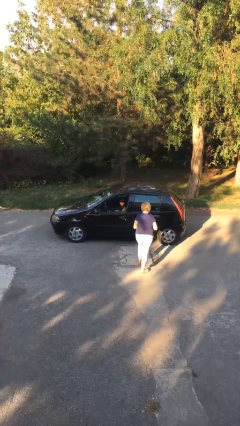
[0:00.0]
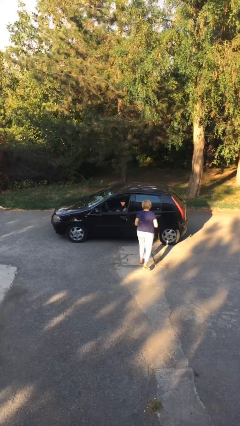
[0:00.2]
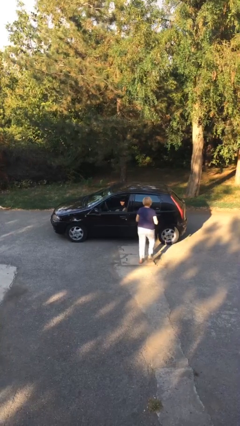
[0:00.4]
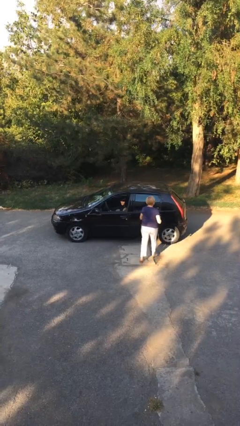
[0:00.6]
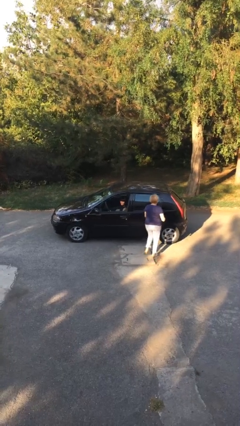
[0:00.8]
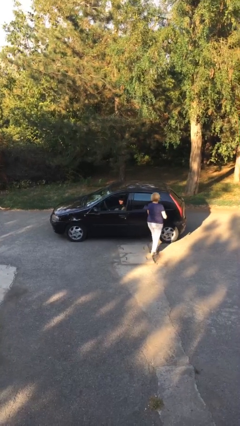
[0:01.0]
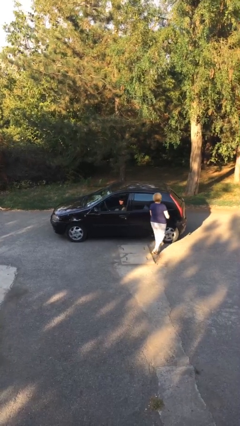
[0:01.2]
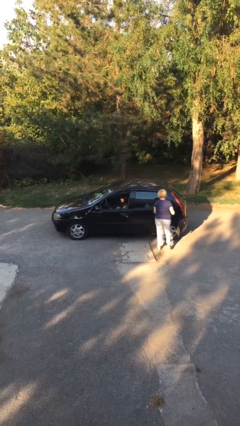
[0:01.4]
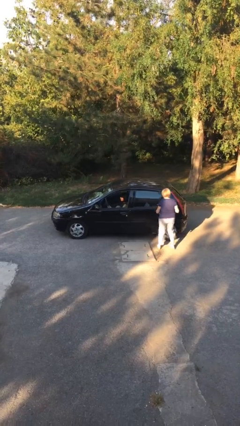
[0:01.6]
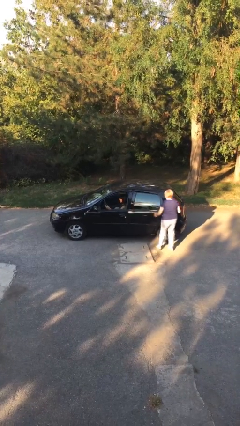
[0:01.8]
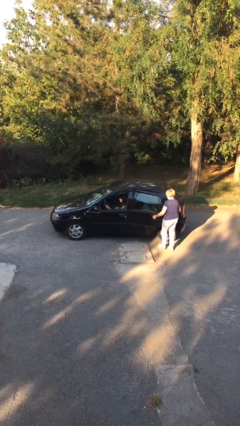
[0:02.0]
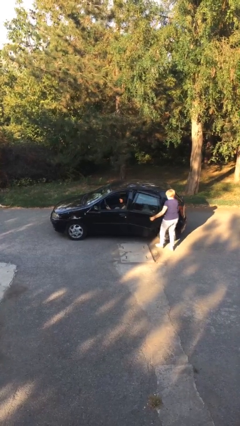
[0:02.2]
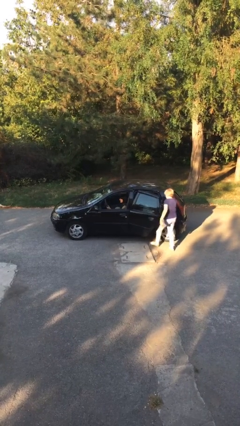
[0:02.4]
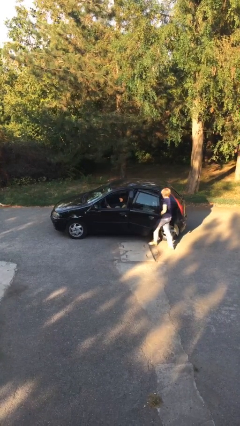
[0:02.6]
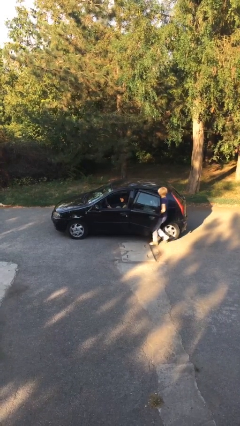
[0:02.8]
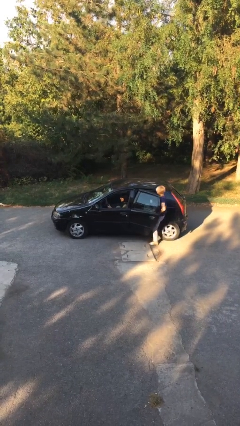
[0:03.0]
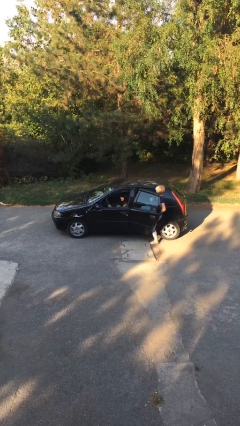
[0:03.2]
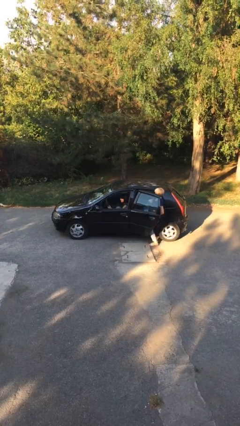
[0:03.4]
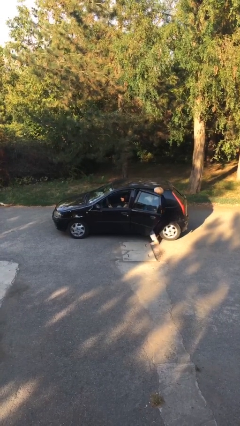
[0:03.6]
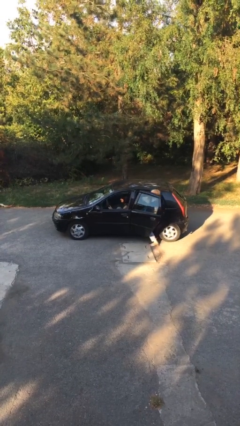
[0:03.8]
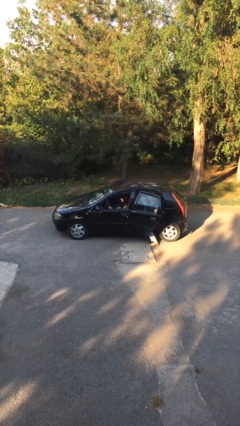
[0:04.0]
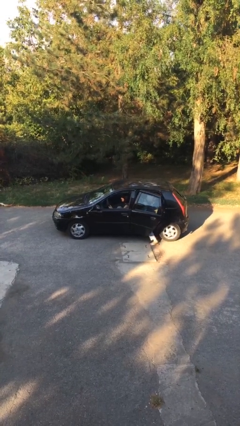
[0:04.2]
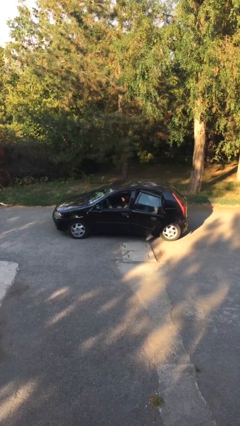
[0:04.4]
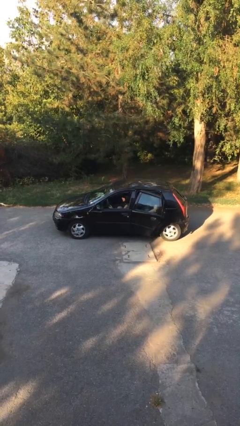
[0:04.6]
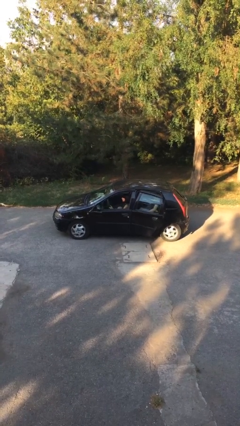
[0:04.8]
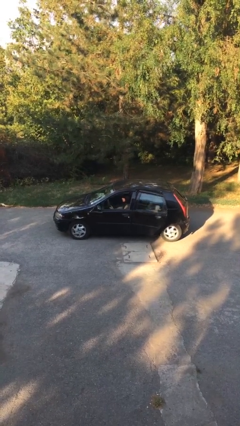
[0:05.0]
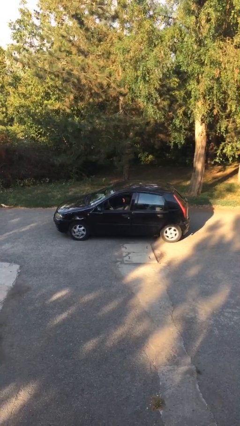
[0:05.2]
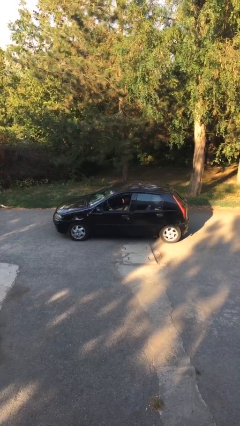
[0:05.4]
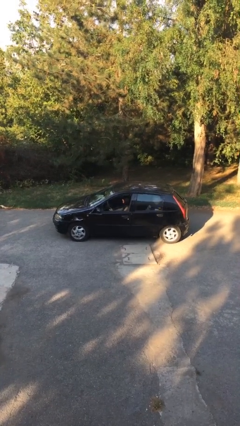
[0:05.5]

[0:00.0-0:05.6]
car picks up person

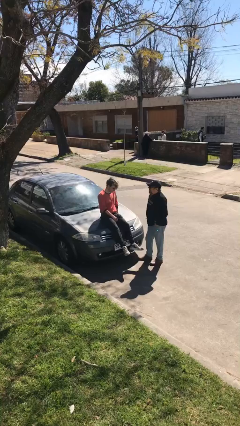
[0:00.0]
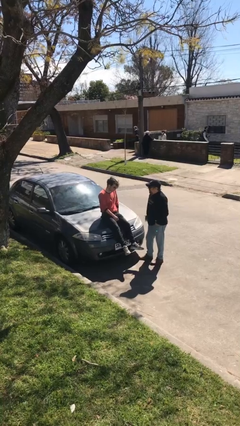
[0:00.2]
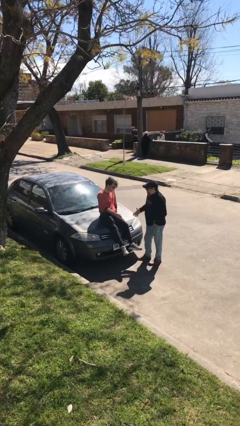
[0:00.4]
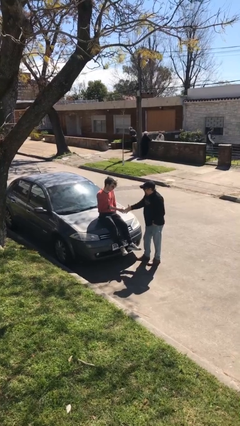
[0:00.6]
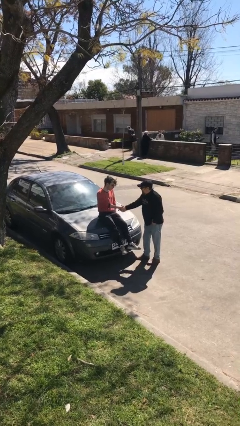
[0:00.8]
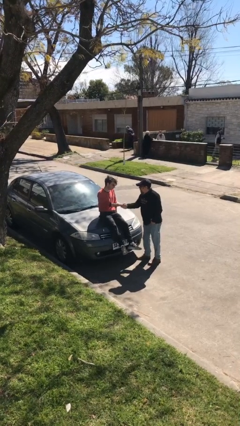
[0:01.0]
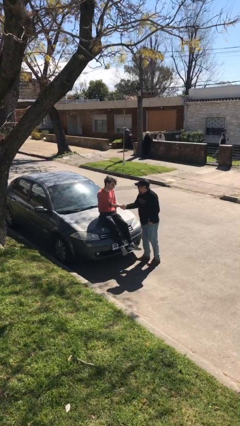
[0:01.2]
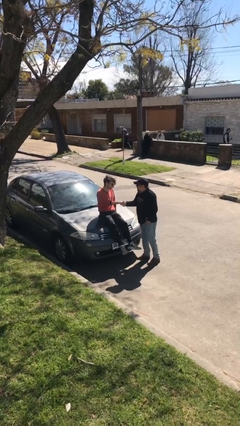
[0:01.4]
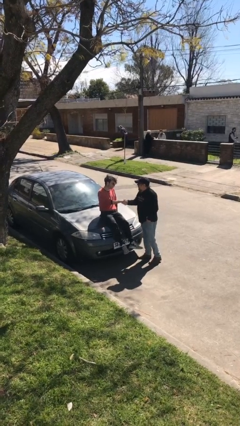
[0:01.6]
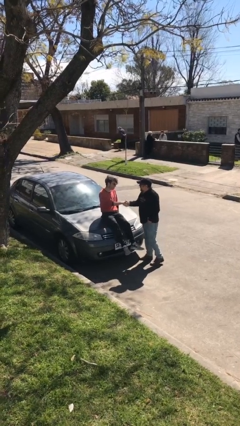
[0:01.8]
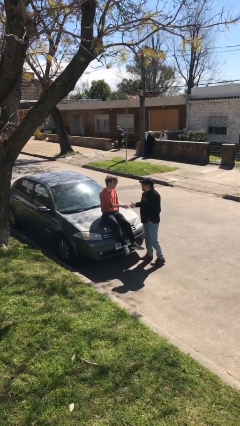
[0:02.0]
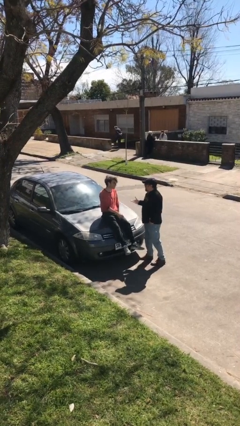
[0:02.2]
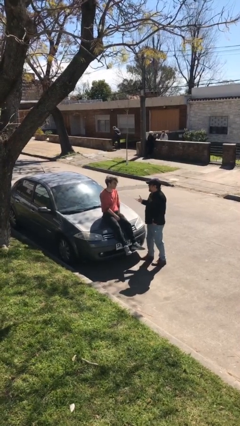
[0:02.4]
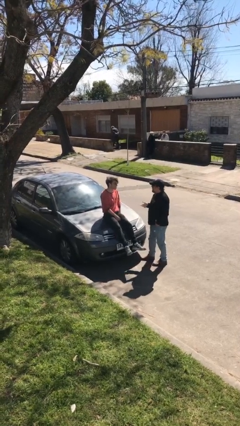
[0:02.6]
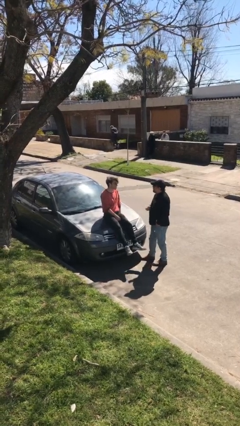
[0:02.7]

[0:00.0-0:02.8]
person shakes hand

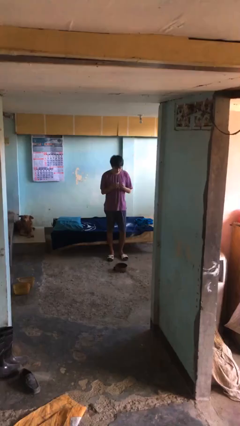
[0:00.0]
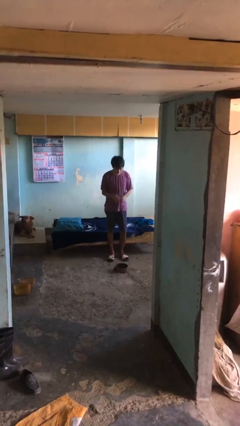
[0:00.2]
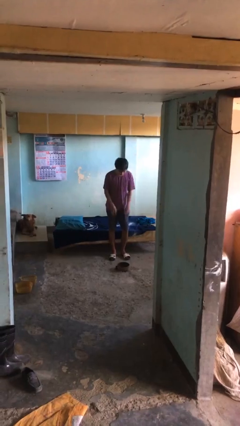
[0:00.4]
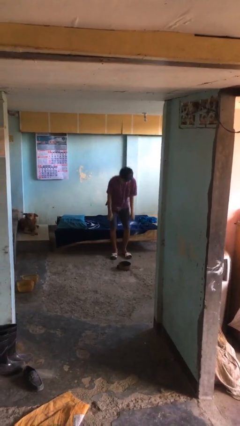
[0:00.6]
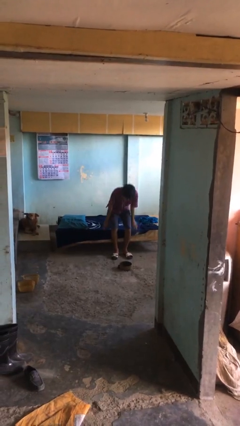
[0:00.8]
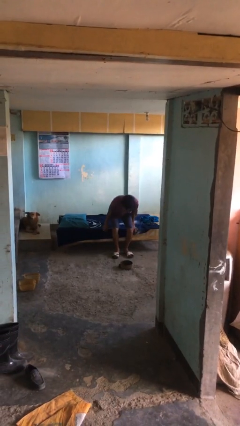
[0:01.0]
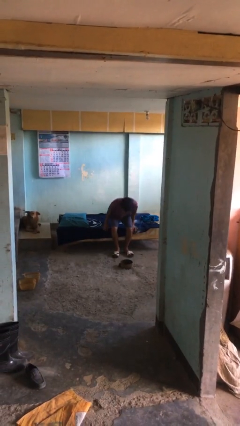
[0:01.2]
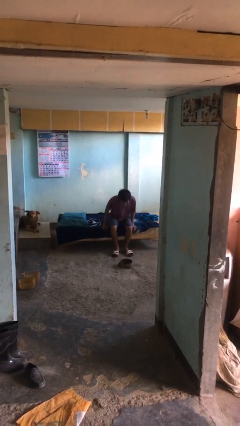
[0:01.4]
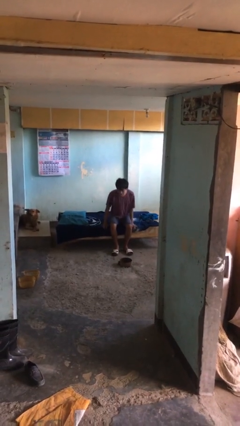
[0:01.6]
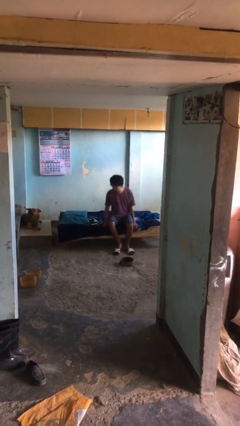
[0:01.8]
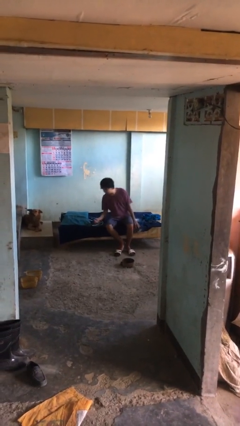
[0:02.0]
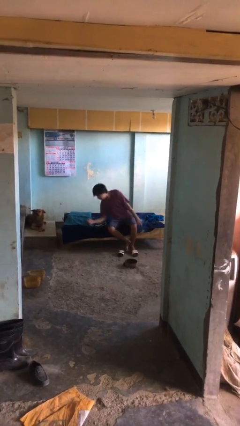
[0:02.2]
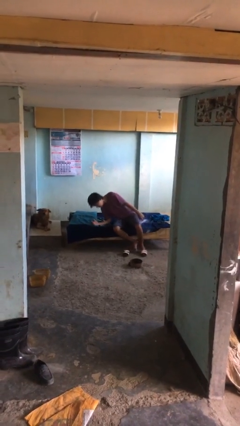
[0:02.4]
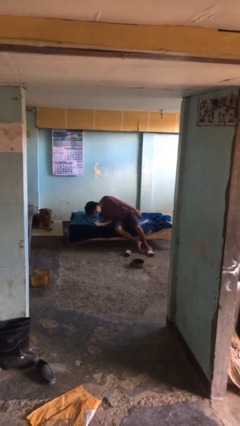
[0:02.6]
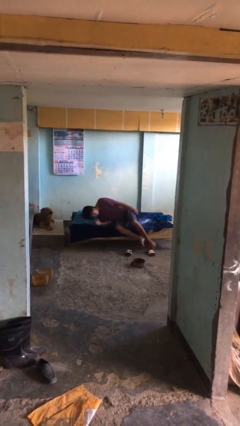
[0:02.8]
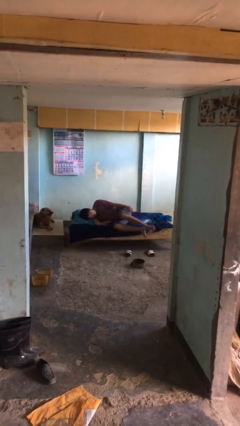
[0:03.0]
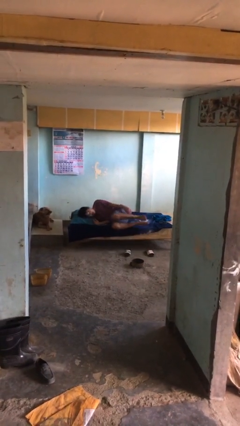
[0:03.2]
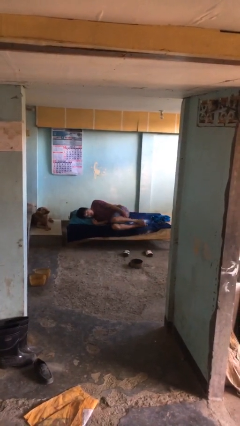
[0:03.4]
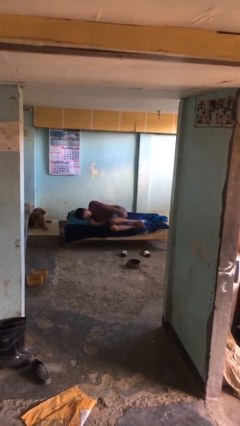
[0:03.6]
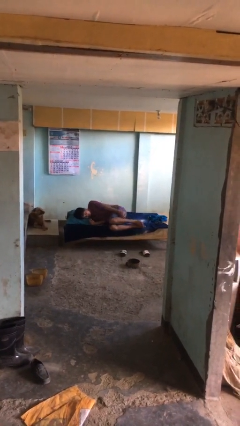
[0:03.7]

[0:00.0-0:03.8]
person lies down on bed

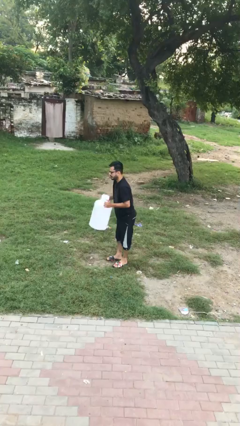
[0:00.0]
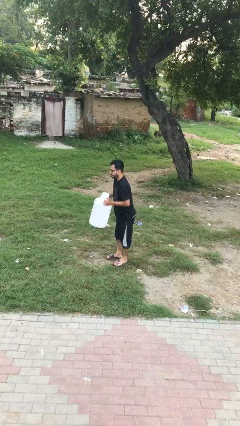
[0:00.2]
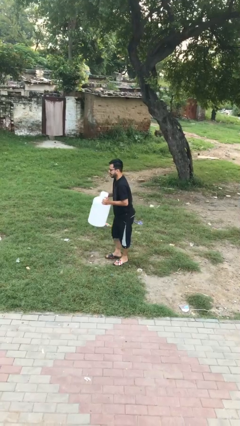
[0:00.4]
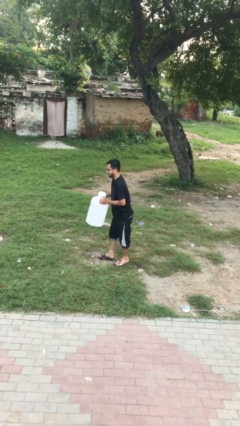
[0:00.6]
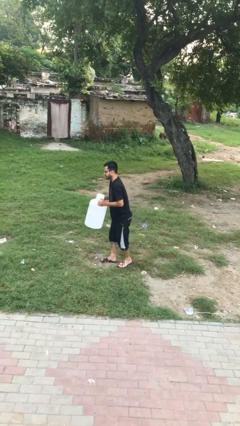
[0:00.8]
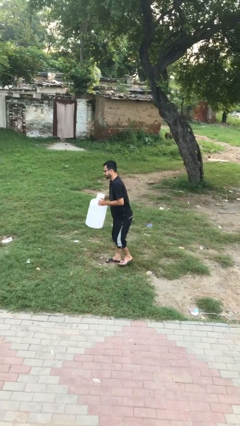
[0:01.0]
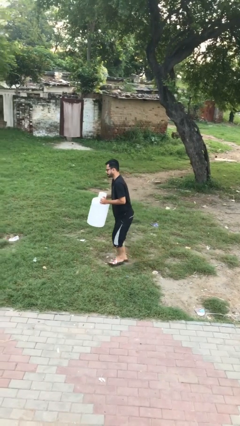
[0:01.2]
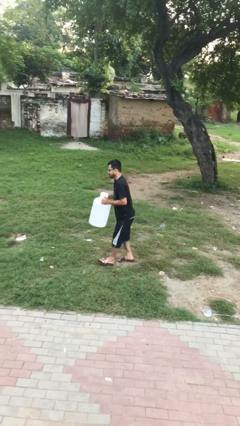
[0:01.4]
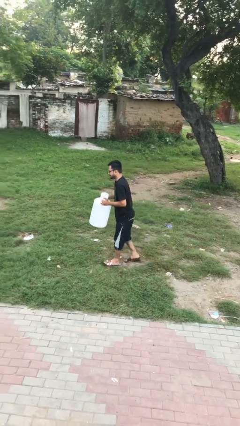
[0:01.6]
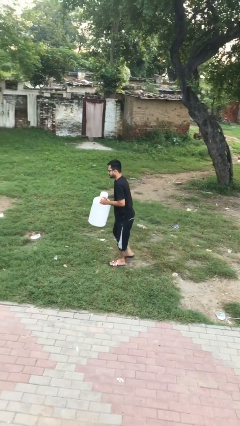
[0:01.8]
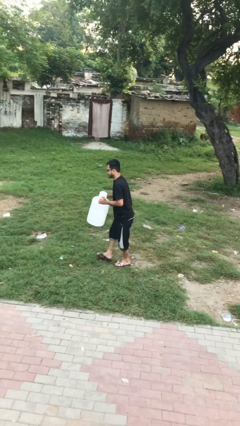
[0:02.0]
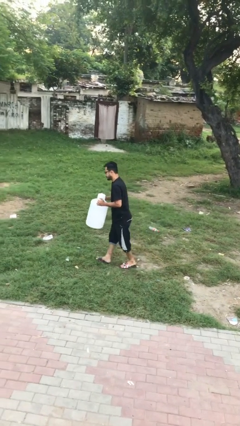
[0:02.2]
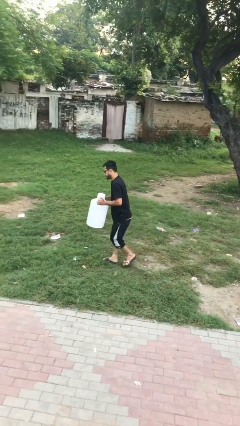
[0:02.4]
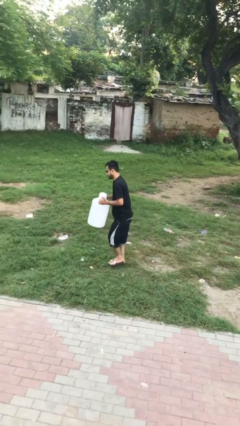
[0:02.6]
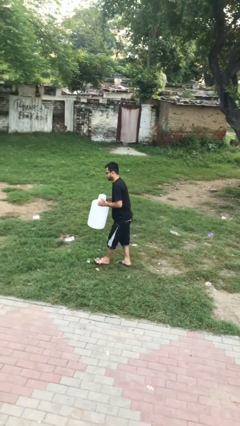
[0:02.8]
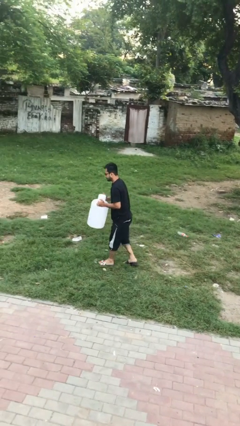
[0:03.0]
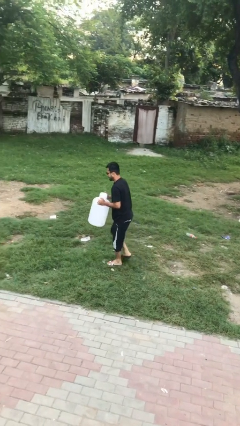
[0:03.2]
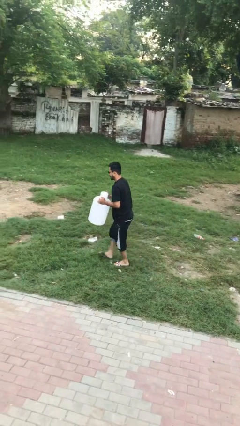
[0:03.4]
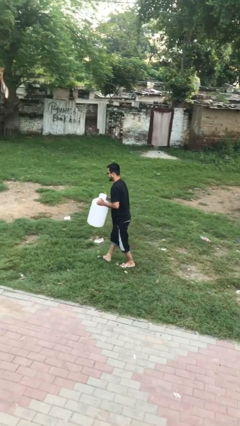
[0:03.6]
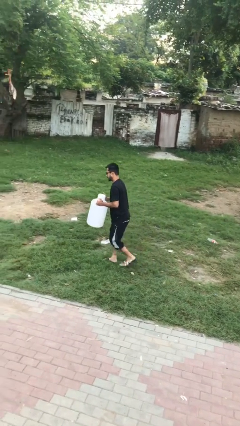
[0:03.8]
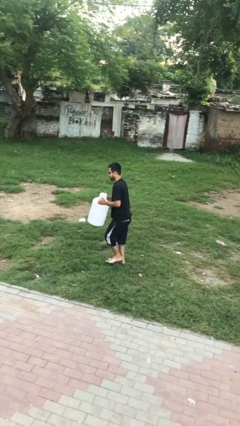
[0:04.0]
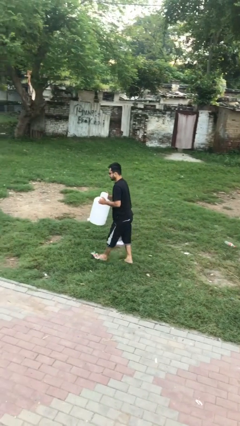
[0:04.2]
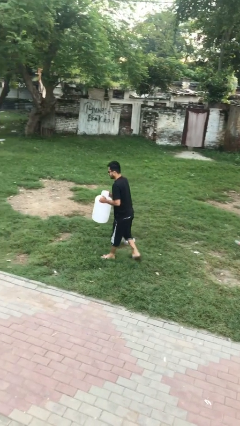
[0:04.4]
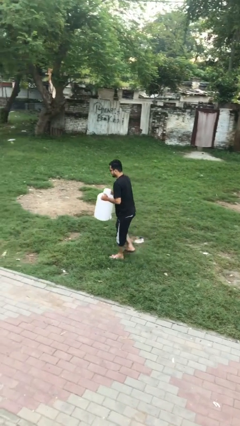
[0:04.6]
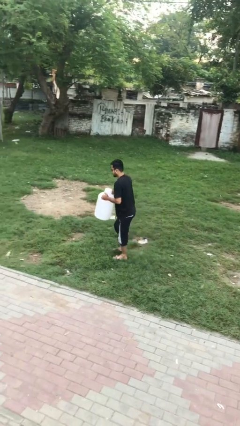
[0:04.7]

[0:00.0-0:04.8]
person carries heavy object

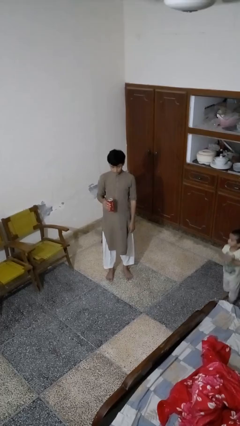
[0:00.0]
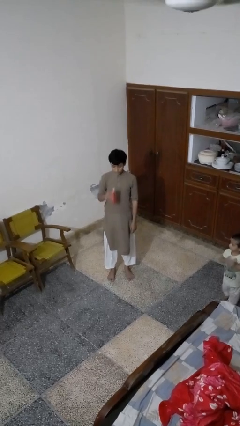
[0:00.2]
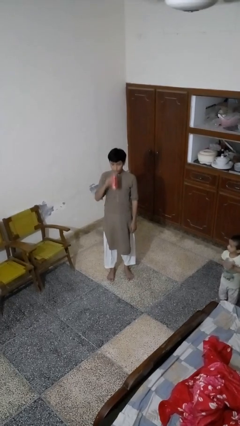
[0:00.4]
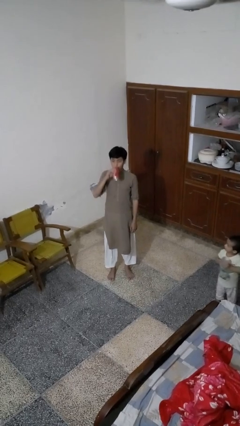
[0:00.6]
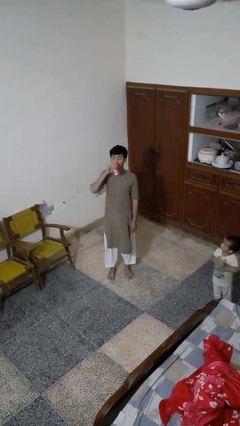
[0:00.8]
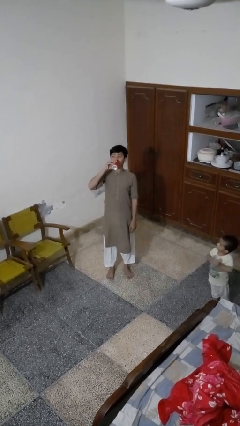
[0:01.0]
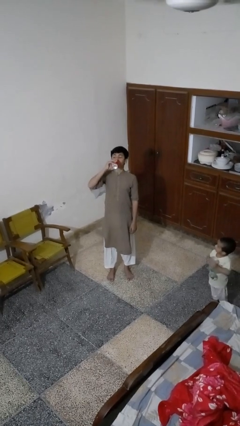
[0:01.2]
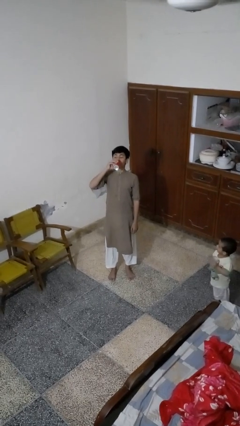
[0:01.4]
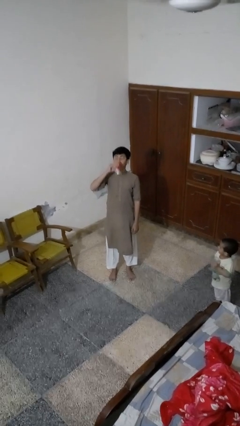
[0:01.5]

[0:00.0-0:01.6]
person drinks from beverage can
